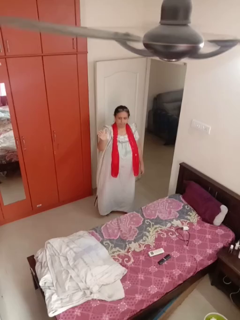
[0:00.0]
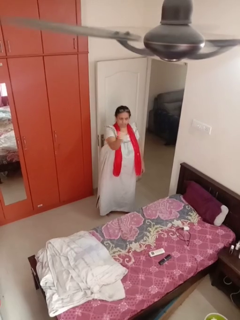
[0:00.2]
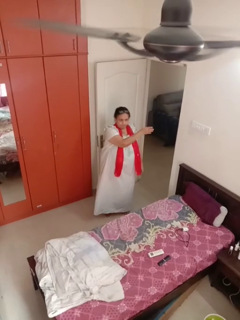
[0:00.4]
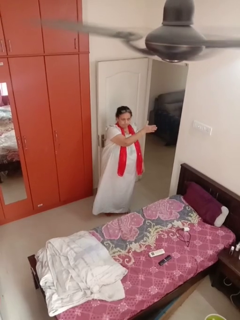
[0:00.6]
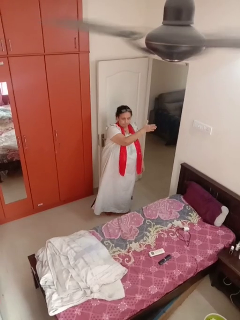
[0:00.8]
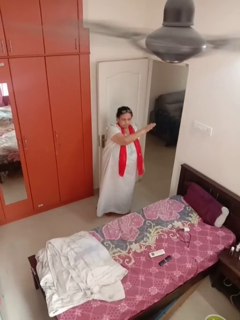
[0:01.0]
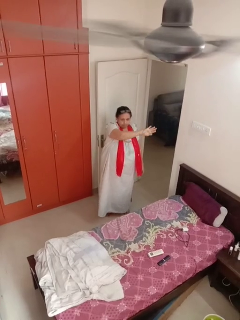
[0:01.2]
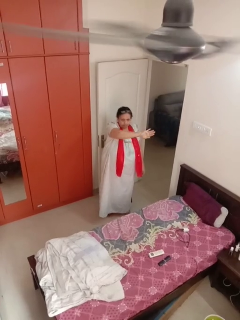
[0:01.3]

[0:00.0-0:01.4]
person gestures swipe left

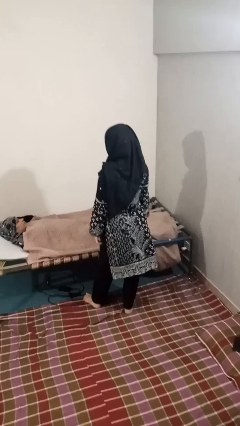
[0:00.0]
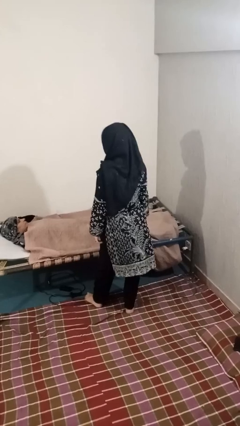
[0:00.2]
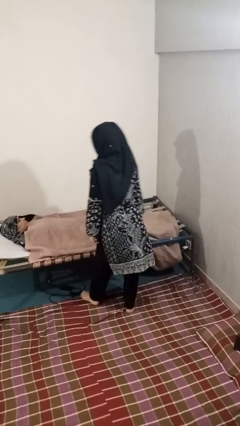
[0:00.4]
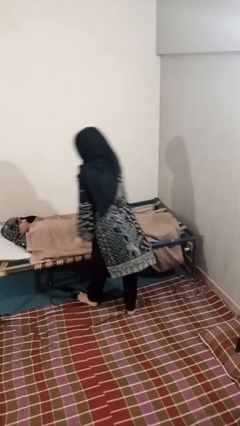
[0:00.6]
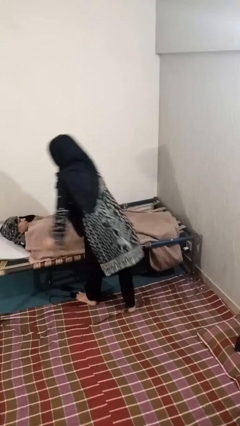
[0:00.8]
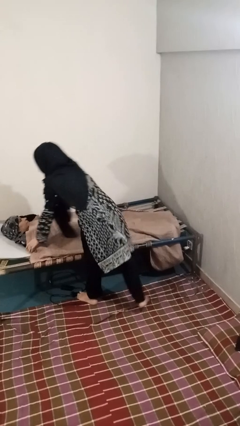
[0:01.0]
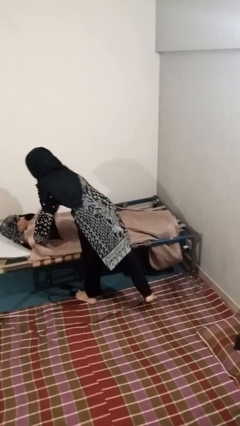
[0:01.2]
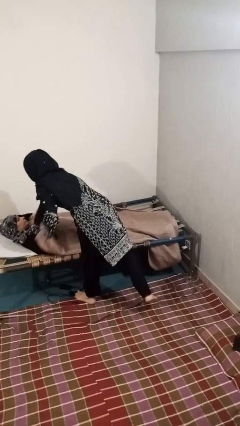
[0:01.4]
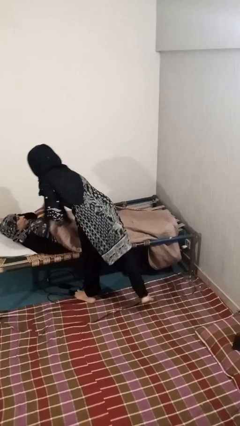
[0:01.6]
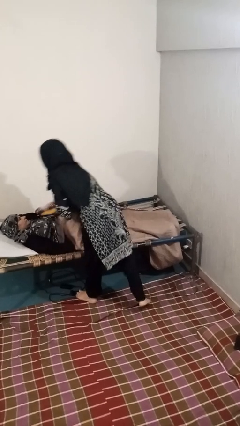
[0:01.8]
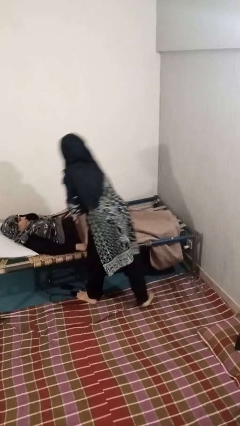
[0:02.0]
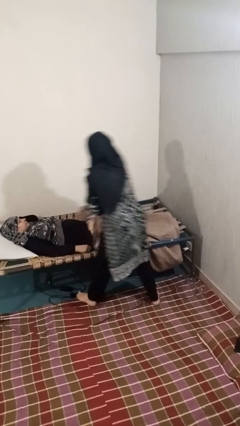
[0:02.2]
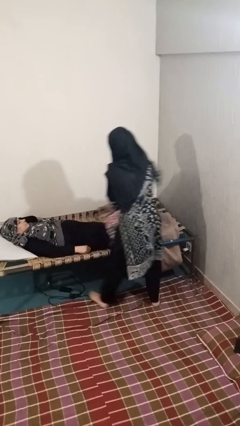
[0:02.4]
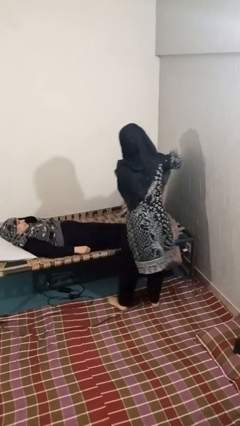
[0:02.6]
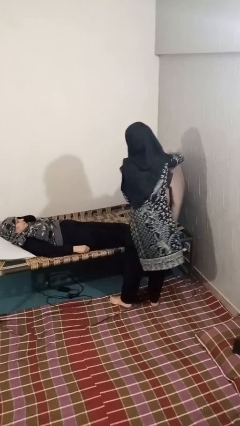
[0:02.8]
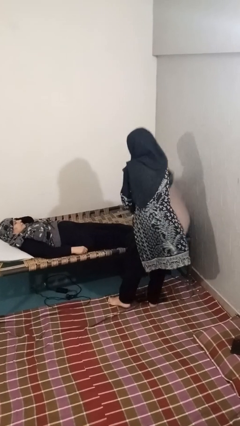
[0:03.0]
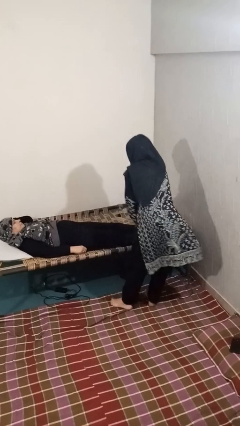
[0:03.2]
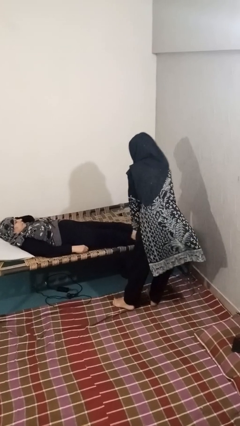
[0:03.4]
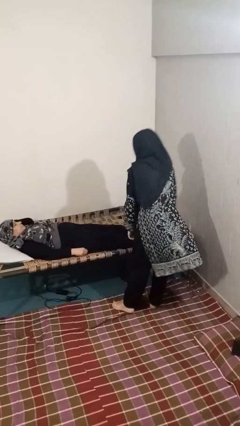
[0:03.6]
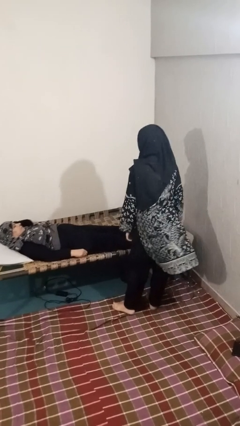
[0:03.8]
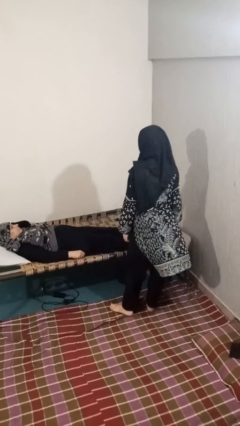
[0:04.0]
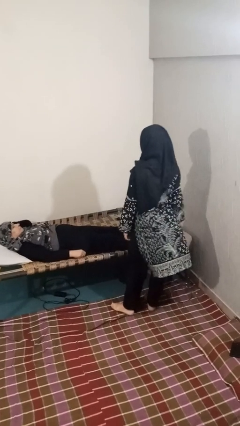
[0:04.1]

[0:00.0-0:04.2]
person uncovers friend with blanket

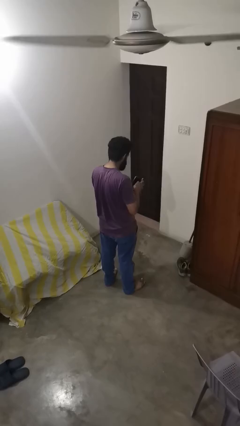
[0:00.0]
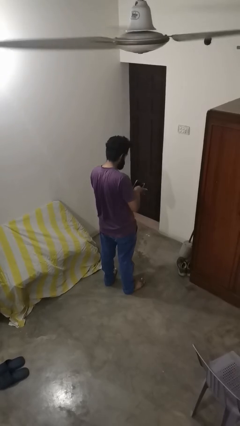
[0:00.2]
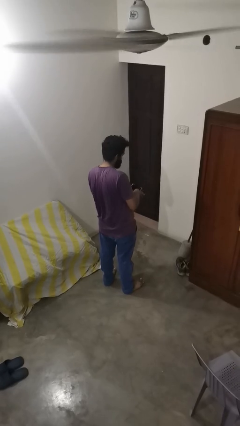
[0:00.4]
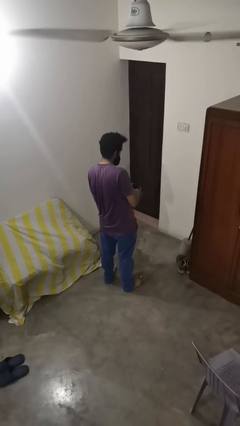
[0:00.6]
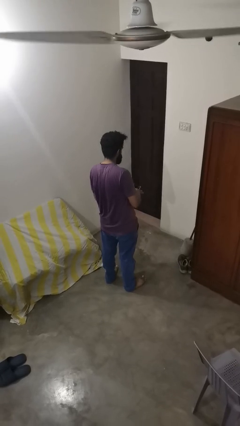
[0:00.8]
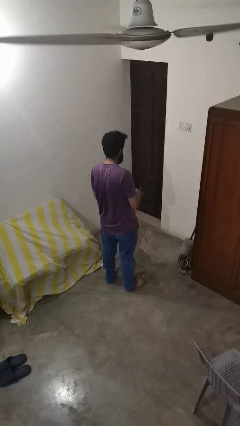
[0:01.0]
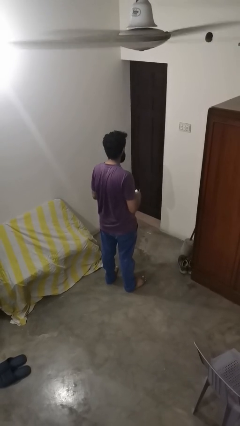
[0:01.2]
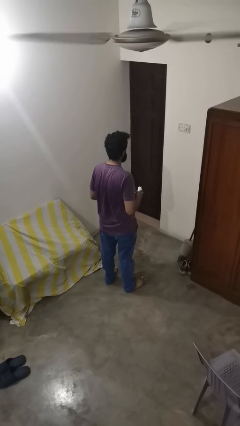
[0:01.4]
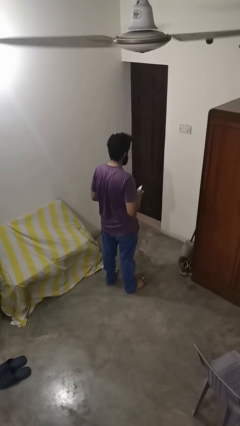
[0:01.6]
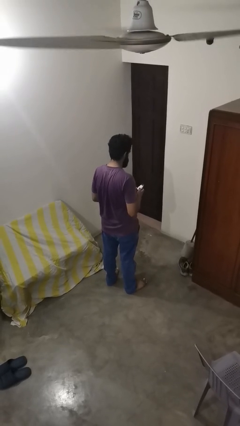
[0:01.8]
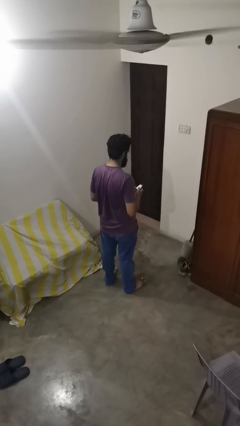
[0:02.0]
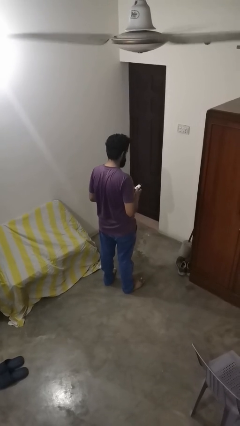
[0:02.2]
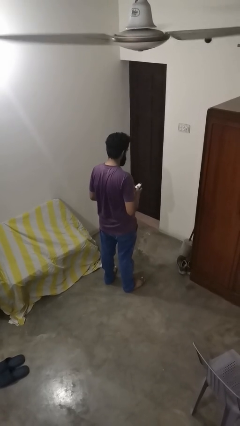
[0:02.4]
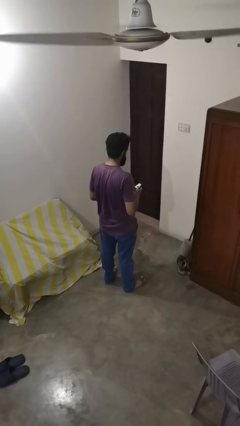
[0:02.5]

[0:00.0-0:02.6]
person takes object from purse

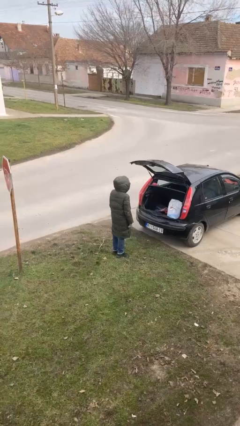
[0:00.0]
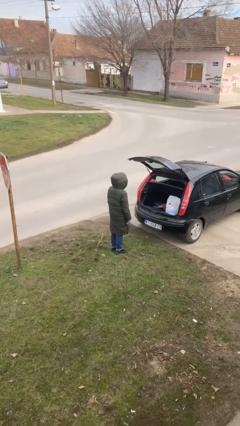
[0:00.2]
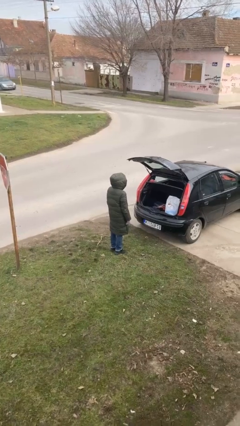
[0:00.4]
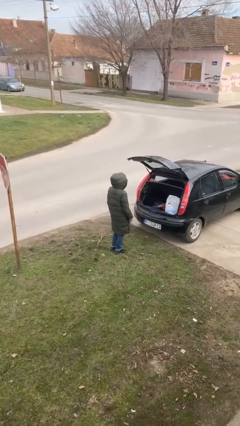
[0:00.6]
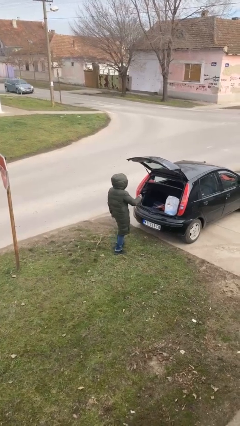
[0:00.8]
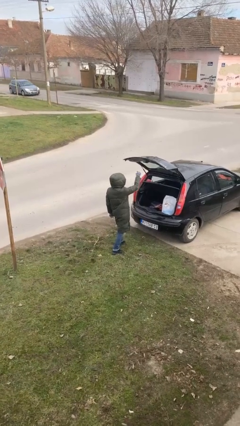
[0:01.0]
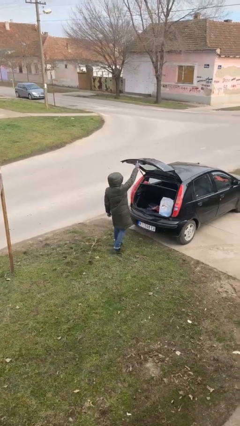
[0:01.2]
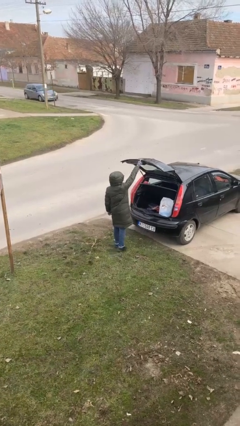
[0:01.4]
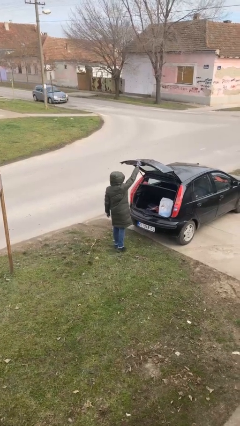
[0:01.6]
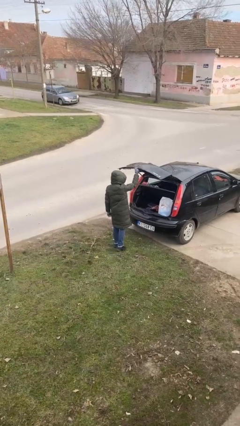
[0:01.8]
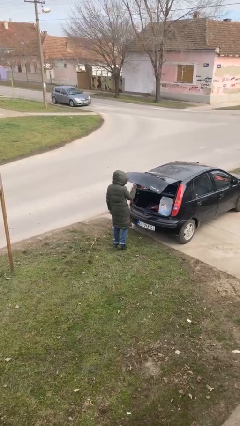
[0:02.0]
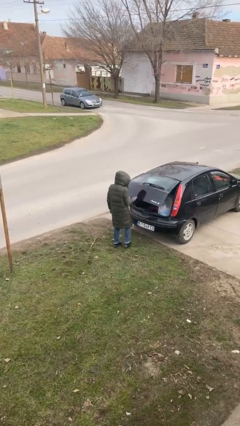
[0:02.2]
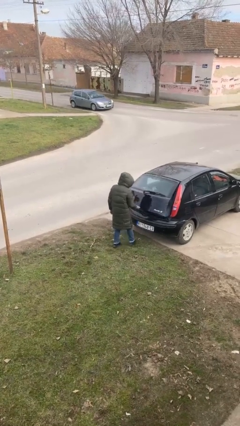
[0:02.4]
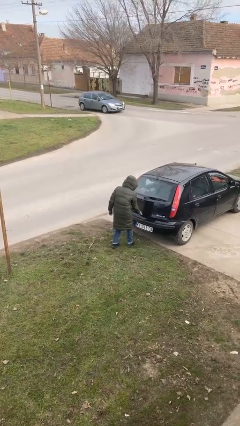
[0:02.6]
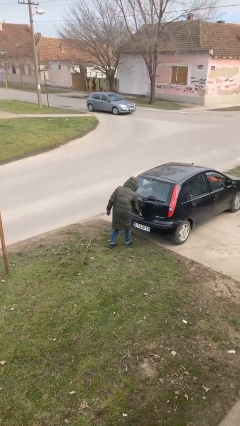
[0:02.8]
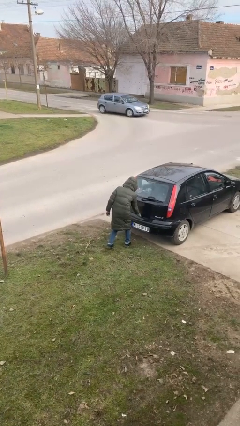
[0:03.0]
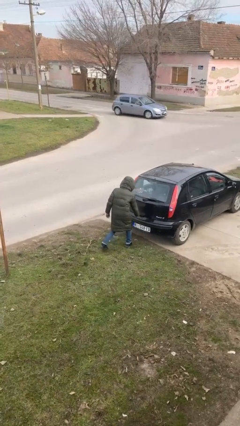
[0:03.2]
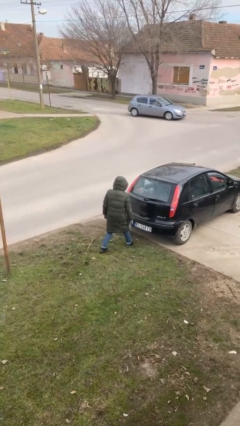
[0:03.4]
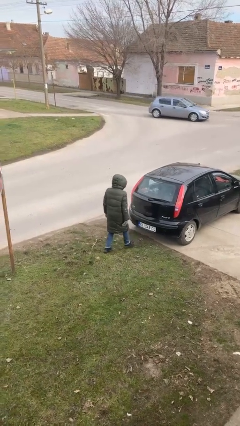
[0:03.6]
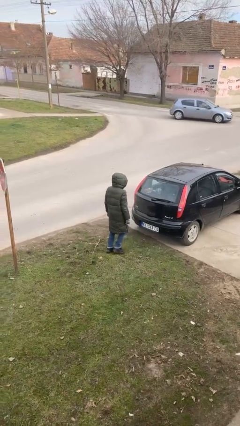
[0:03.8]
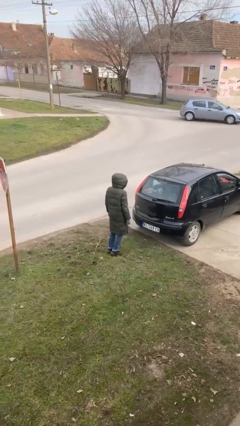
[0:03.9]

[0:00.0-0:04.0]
person closes car trunk

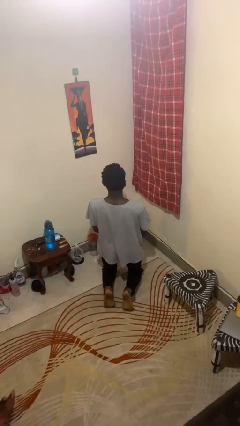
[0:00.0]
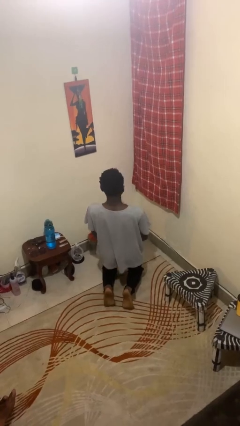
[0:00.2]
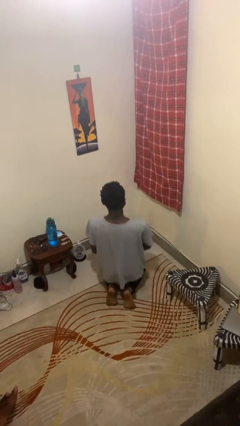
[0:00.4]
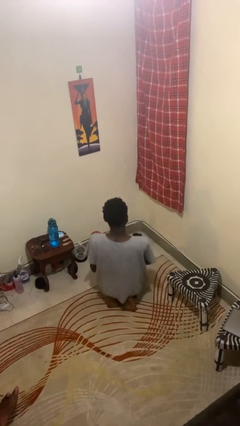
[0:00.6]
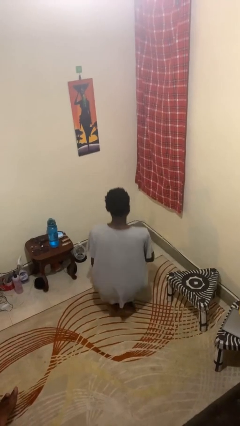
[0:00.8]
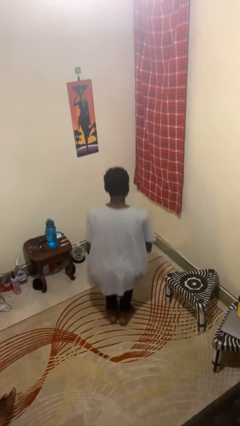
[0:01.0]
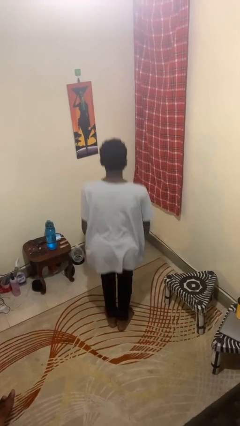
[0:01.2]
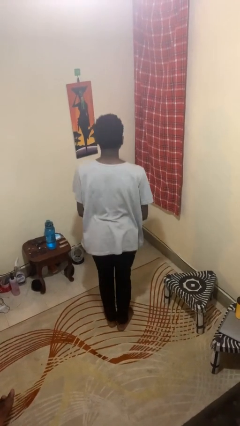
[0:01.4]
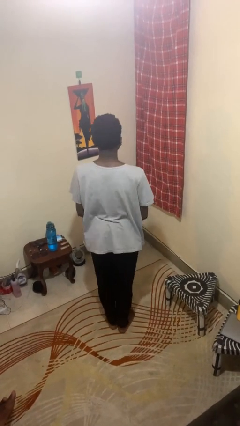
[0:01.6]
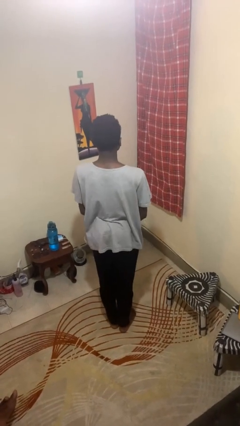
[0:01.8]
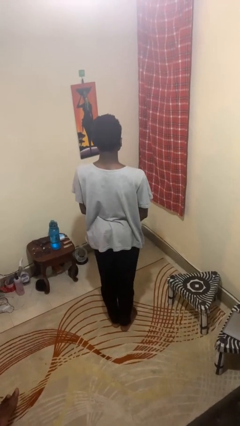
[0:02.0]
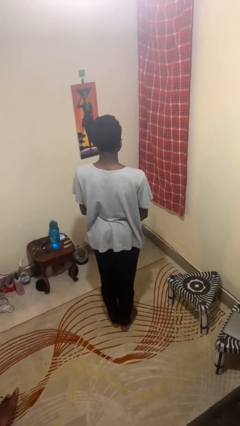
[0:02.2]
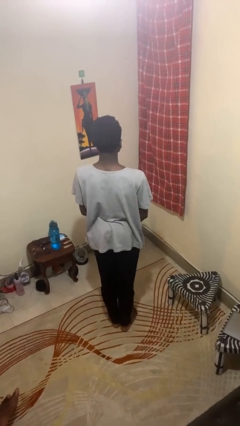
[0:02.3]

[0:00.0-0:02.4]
person stands up from floor

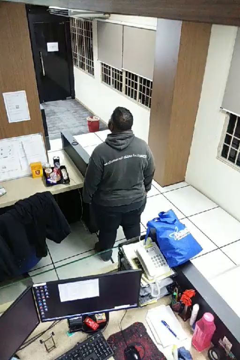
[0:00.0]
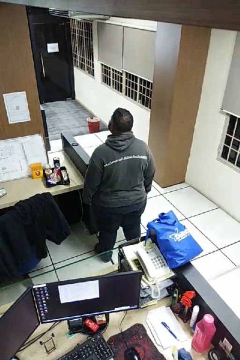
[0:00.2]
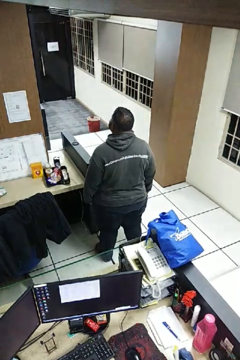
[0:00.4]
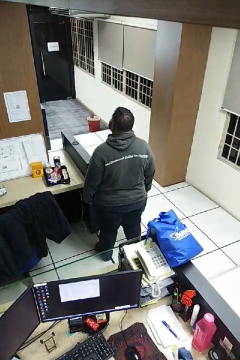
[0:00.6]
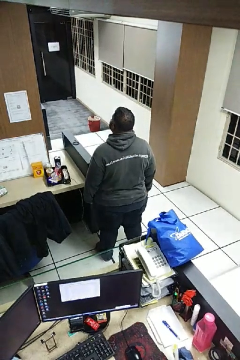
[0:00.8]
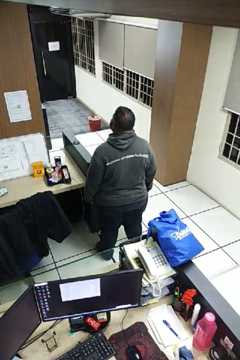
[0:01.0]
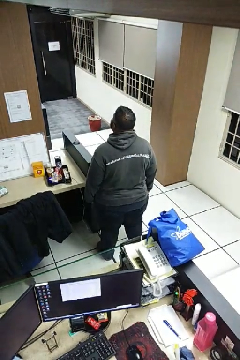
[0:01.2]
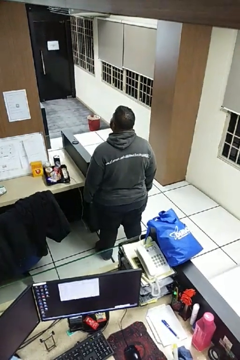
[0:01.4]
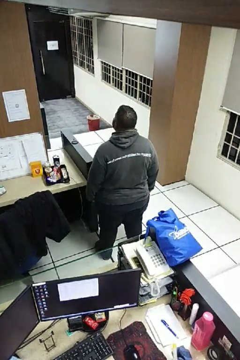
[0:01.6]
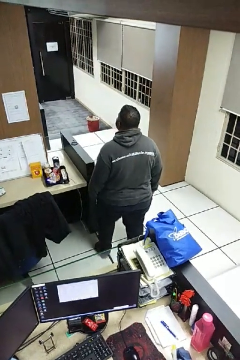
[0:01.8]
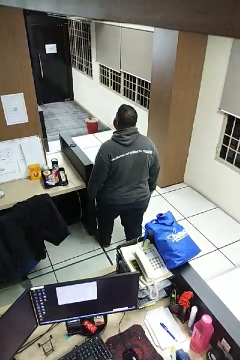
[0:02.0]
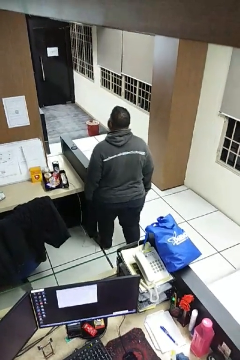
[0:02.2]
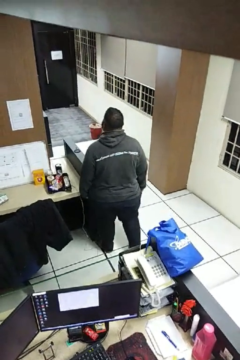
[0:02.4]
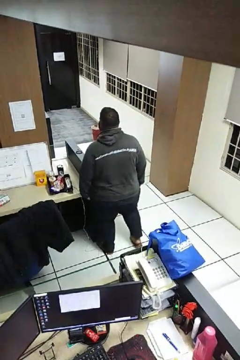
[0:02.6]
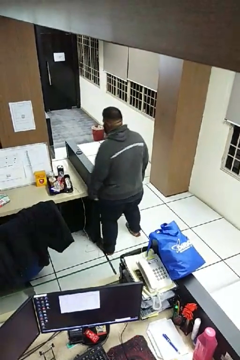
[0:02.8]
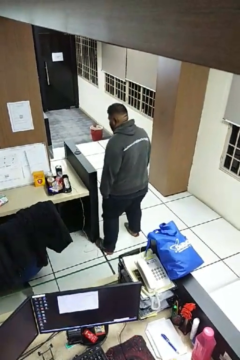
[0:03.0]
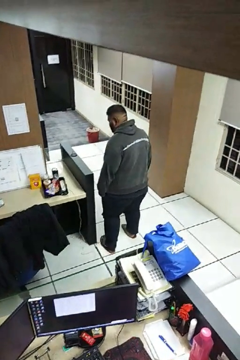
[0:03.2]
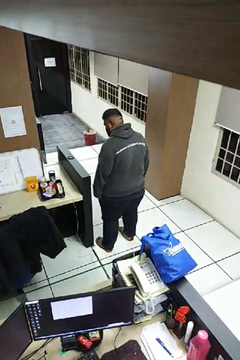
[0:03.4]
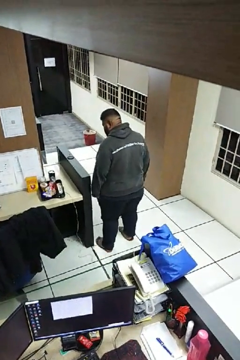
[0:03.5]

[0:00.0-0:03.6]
person bumps into table
